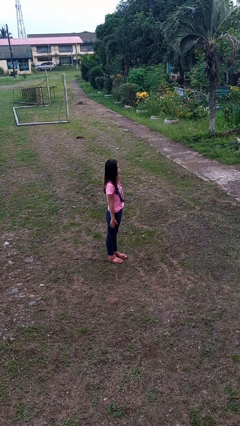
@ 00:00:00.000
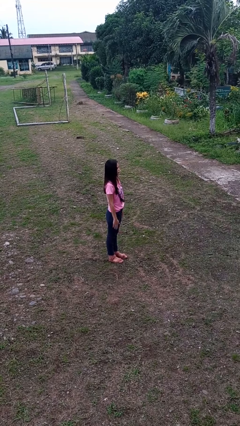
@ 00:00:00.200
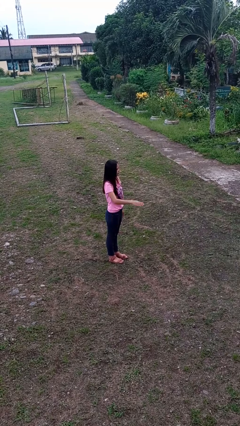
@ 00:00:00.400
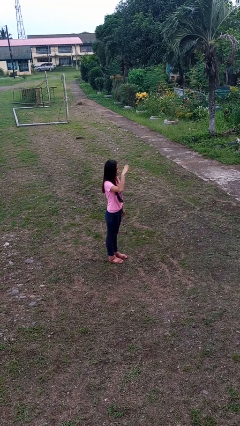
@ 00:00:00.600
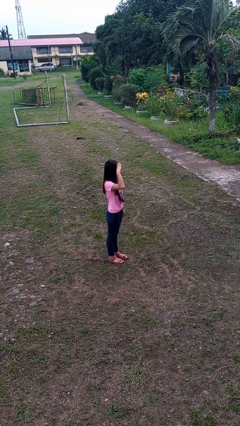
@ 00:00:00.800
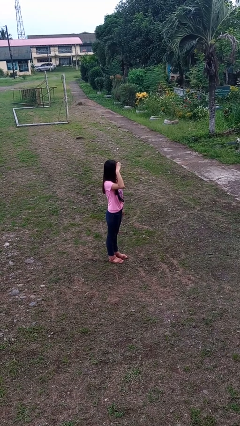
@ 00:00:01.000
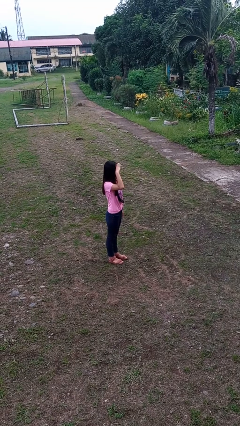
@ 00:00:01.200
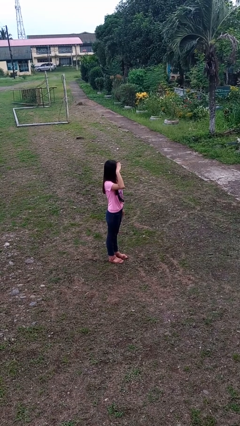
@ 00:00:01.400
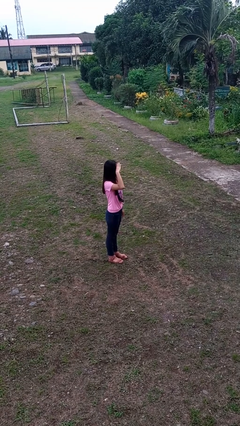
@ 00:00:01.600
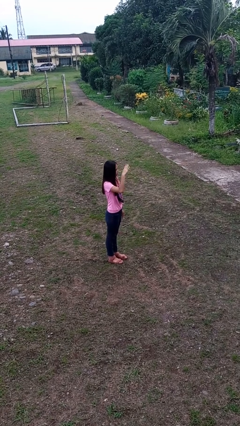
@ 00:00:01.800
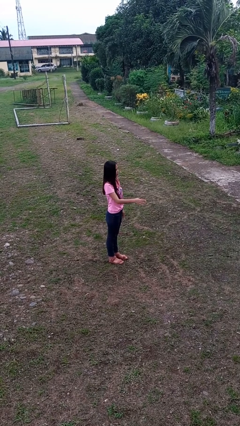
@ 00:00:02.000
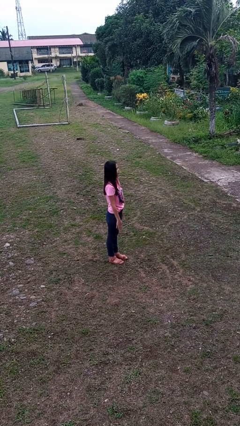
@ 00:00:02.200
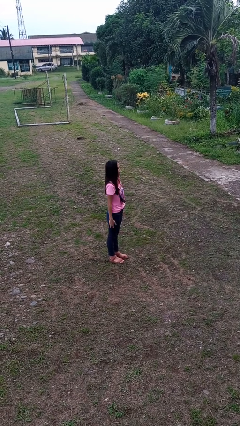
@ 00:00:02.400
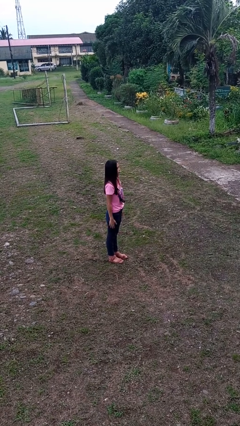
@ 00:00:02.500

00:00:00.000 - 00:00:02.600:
person salutes

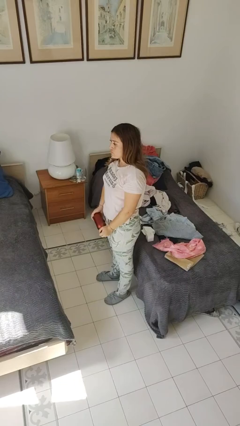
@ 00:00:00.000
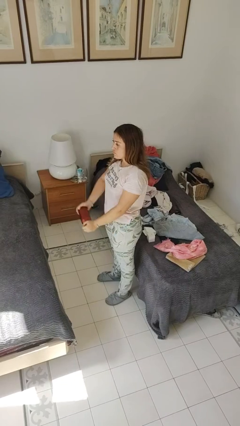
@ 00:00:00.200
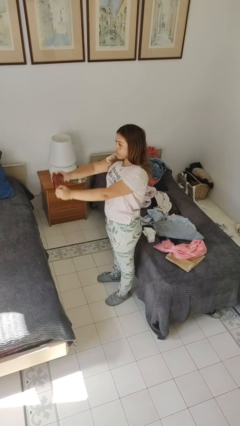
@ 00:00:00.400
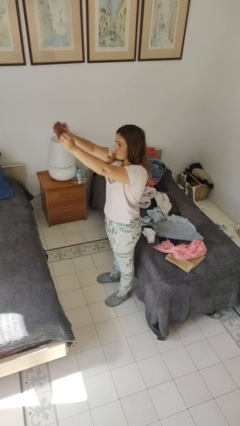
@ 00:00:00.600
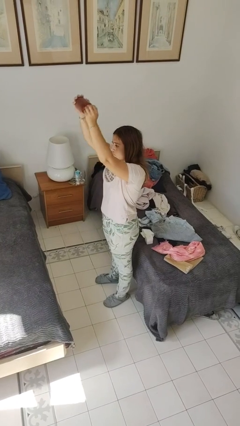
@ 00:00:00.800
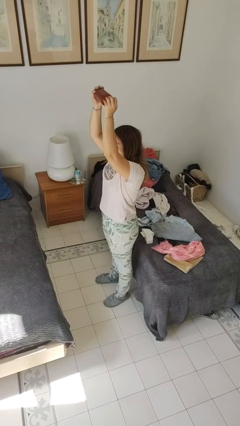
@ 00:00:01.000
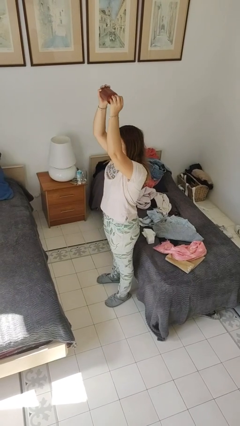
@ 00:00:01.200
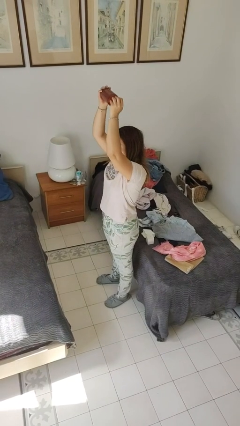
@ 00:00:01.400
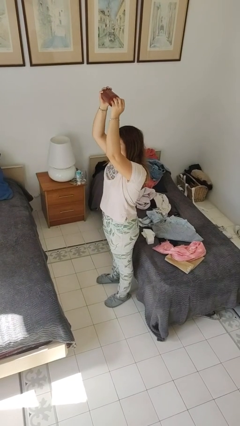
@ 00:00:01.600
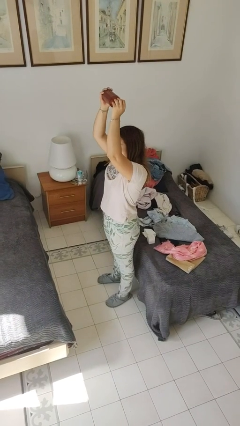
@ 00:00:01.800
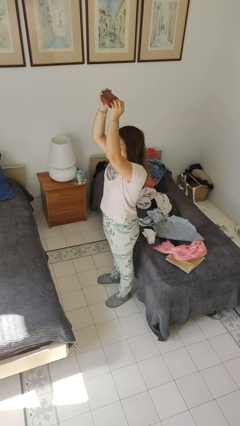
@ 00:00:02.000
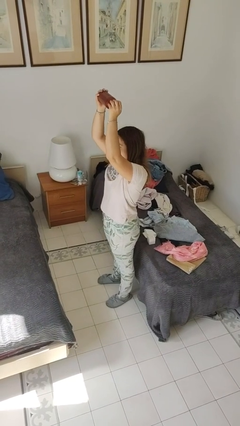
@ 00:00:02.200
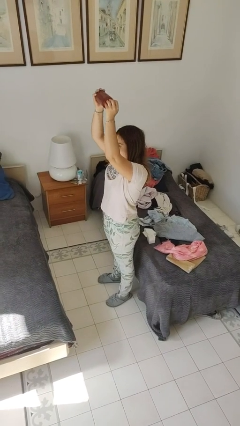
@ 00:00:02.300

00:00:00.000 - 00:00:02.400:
person holds object above head

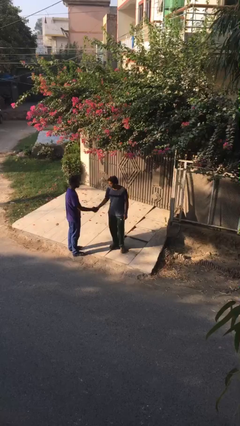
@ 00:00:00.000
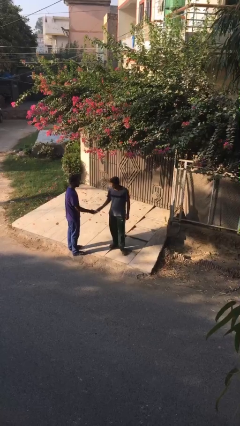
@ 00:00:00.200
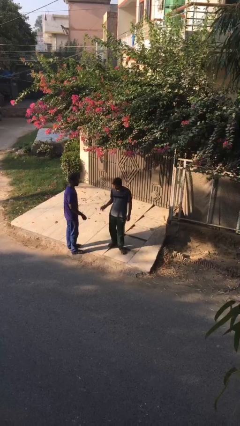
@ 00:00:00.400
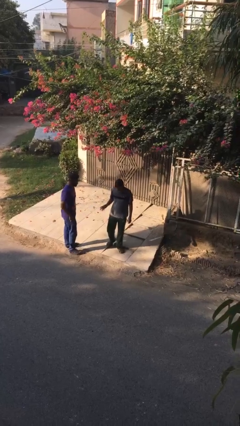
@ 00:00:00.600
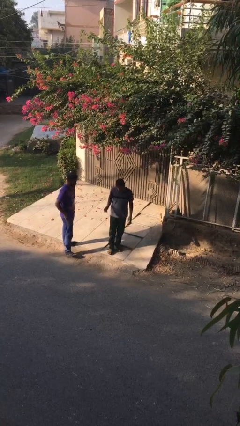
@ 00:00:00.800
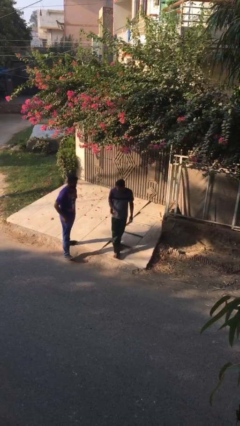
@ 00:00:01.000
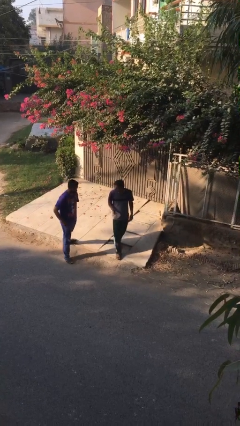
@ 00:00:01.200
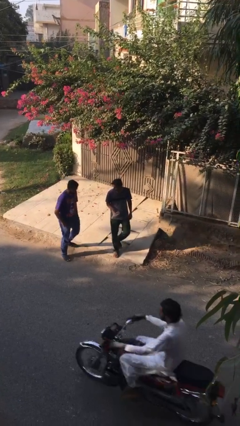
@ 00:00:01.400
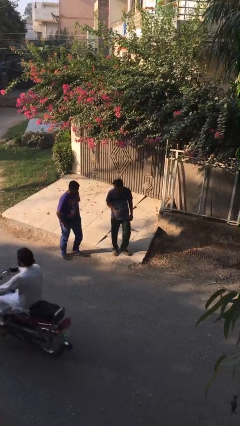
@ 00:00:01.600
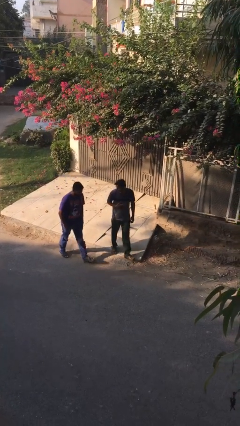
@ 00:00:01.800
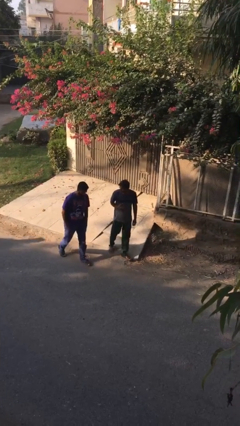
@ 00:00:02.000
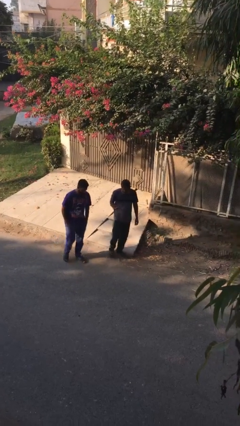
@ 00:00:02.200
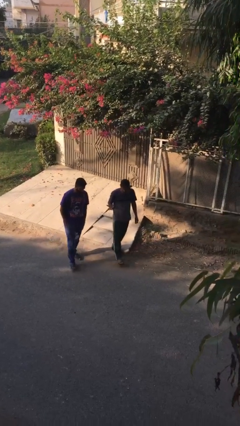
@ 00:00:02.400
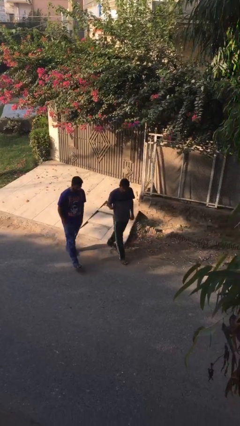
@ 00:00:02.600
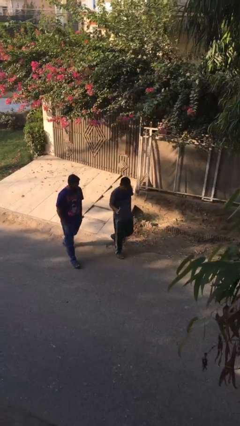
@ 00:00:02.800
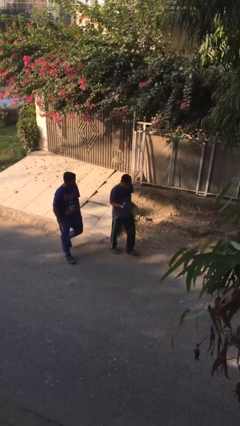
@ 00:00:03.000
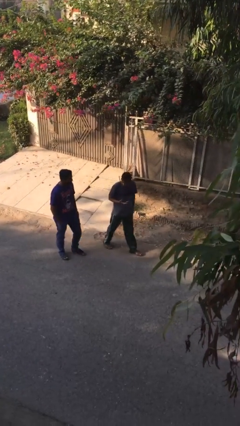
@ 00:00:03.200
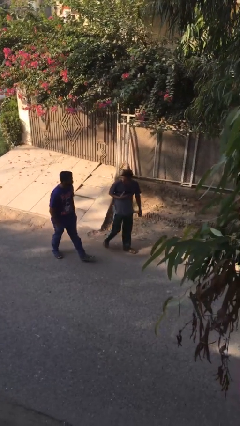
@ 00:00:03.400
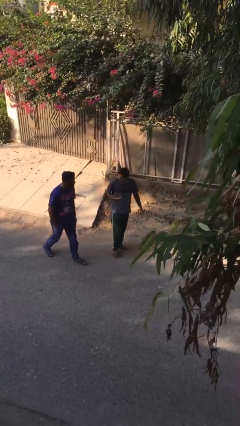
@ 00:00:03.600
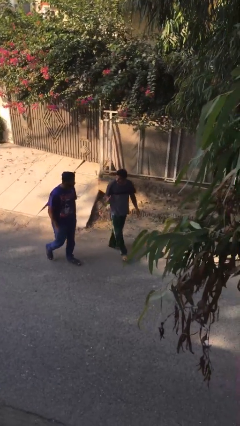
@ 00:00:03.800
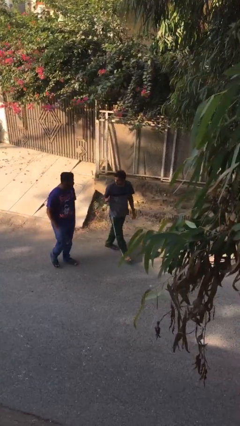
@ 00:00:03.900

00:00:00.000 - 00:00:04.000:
person talks to person

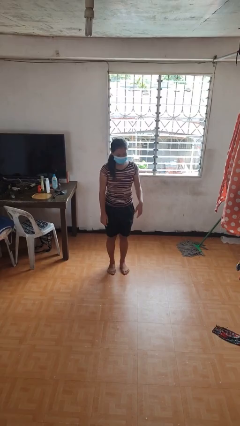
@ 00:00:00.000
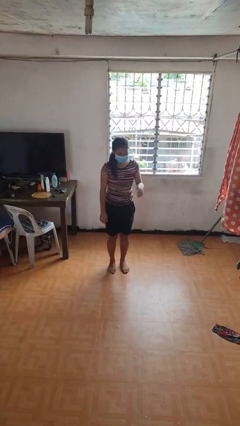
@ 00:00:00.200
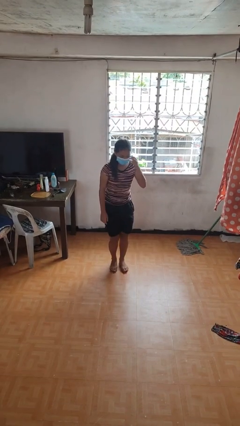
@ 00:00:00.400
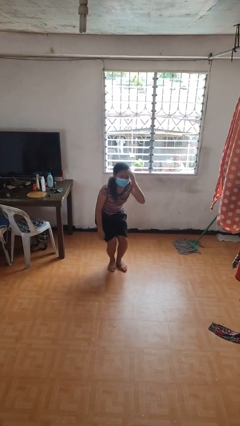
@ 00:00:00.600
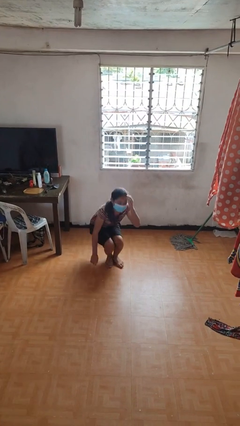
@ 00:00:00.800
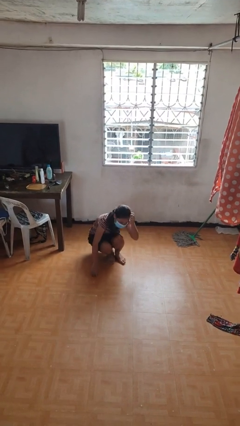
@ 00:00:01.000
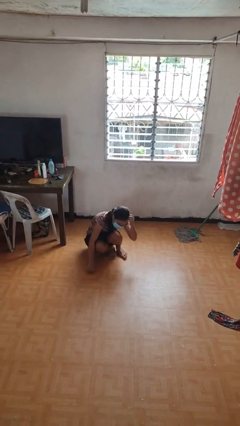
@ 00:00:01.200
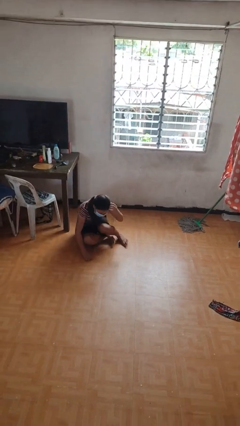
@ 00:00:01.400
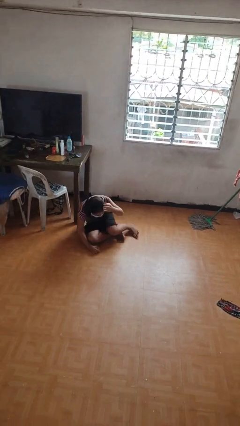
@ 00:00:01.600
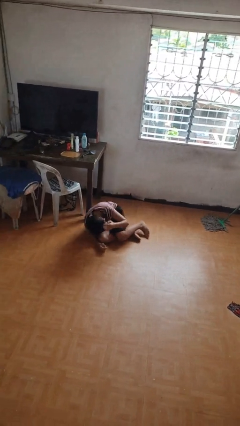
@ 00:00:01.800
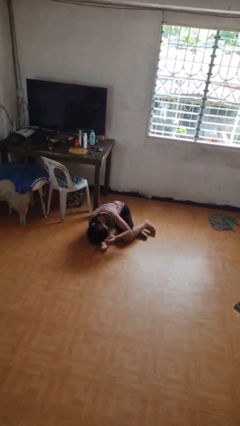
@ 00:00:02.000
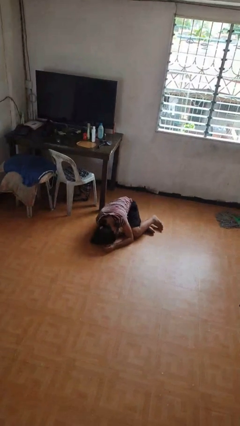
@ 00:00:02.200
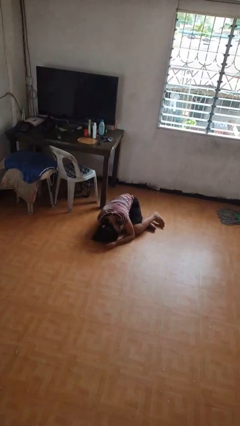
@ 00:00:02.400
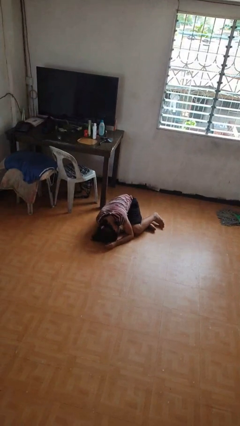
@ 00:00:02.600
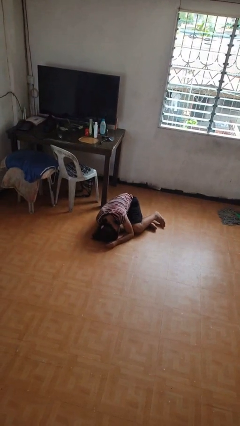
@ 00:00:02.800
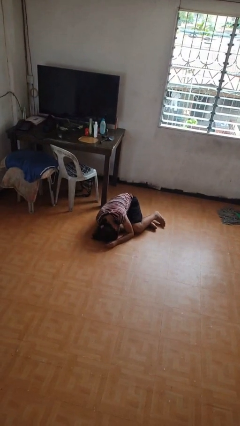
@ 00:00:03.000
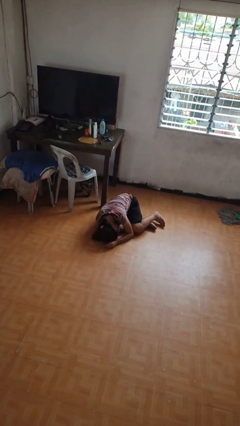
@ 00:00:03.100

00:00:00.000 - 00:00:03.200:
person falls while standing

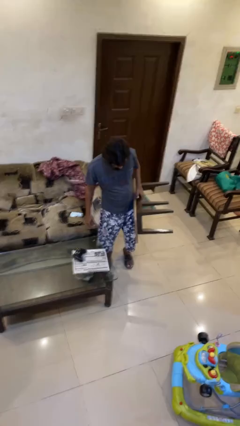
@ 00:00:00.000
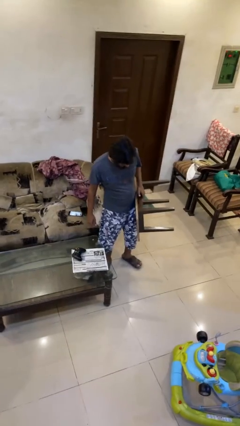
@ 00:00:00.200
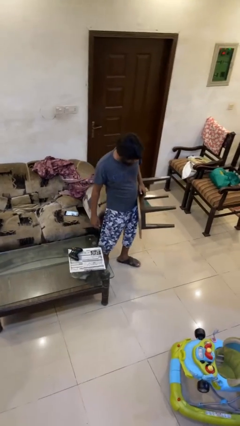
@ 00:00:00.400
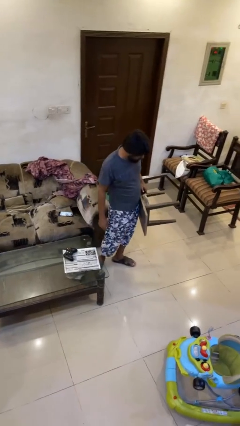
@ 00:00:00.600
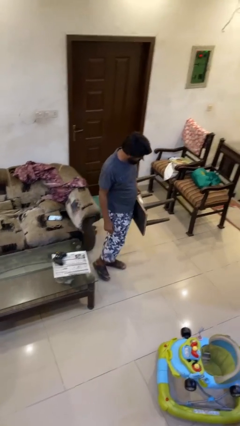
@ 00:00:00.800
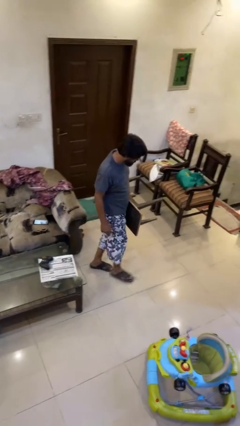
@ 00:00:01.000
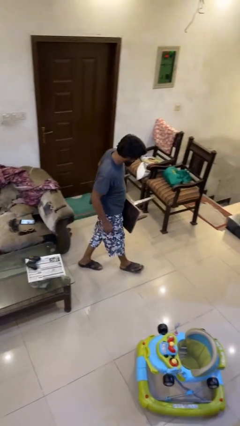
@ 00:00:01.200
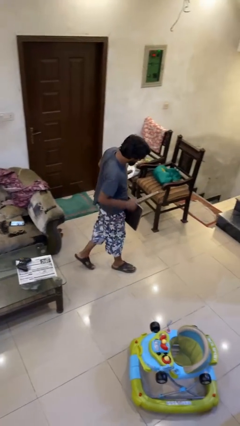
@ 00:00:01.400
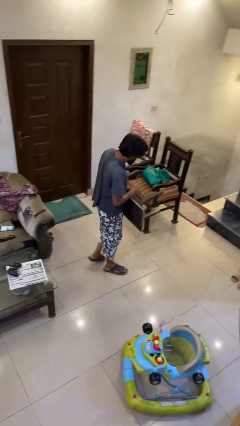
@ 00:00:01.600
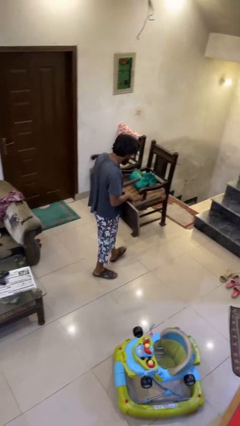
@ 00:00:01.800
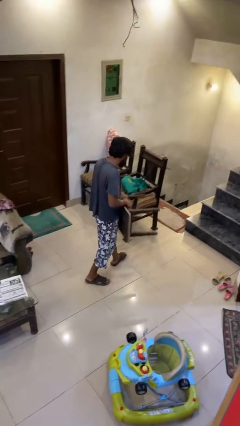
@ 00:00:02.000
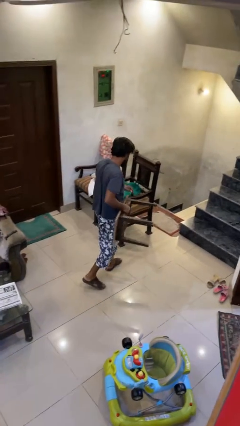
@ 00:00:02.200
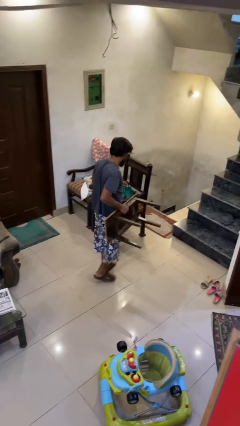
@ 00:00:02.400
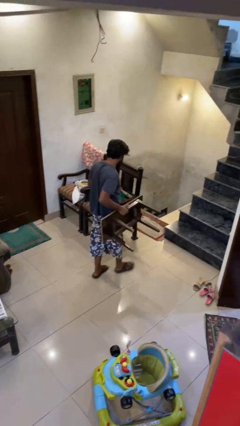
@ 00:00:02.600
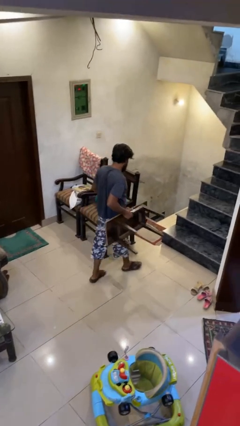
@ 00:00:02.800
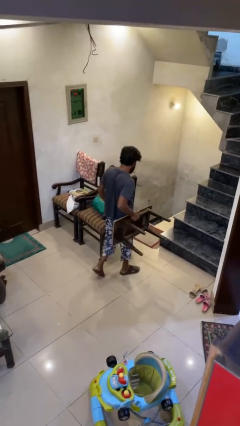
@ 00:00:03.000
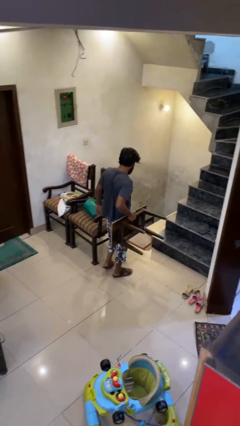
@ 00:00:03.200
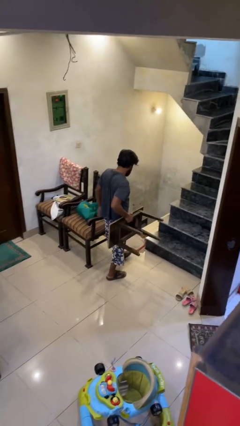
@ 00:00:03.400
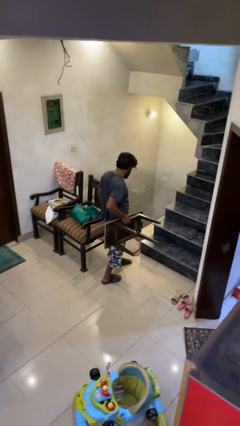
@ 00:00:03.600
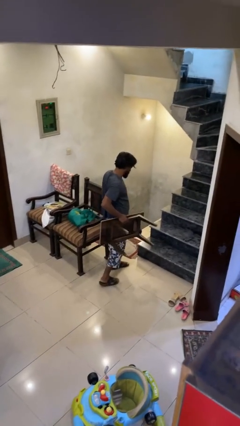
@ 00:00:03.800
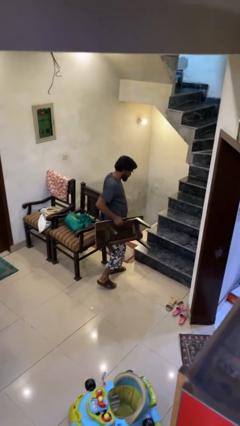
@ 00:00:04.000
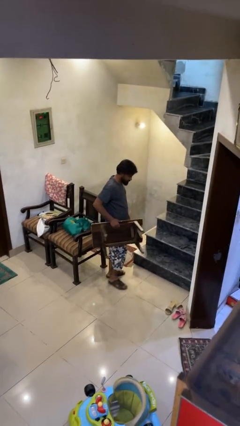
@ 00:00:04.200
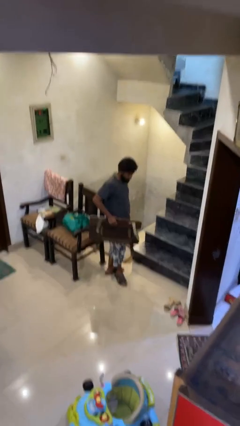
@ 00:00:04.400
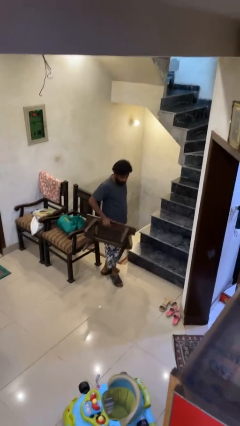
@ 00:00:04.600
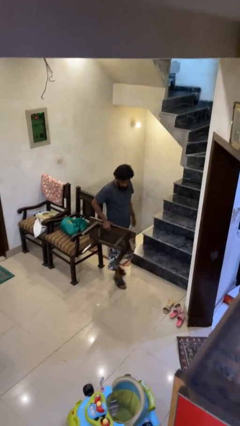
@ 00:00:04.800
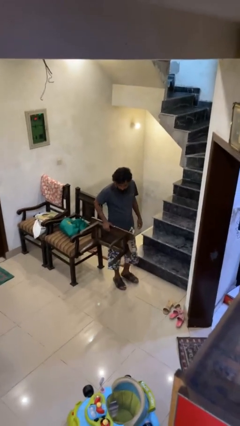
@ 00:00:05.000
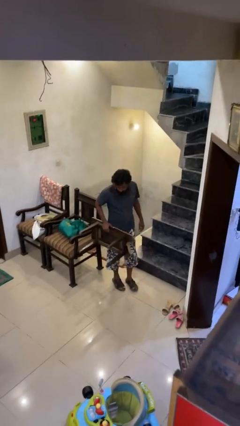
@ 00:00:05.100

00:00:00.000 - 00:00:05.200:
person carries furniture
